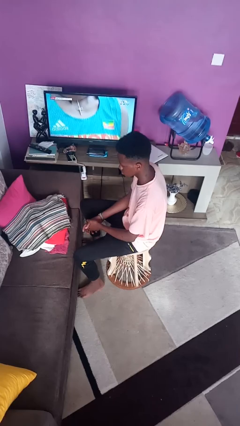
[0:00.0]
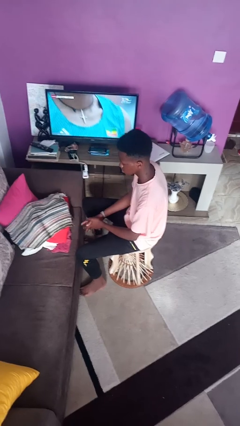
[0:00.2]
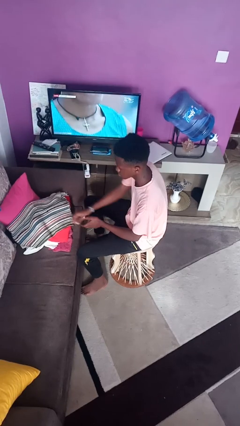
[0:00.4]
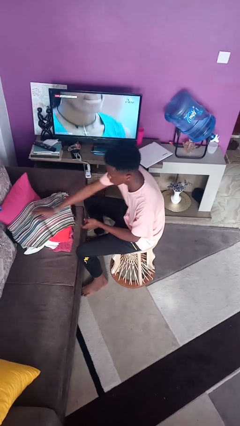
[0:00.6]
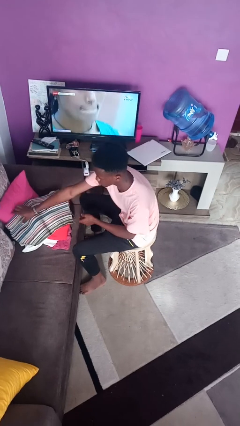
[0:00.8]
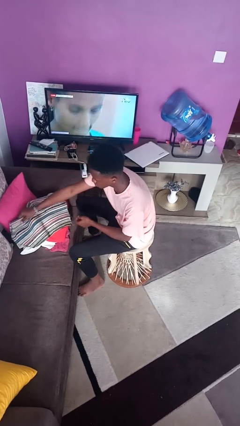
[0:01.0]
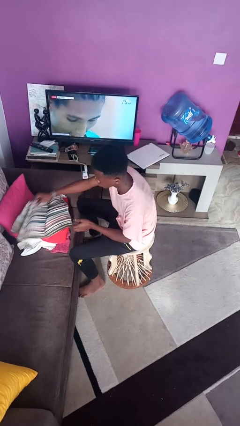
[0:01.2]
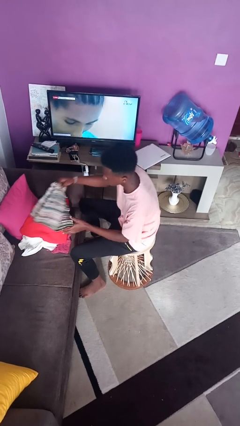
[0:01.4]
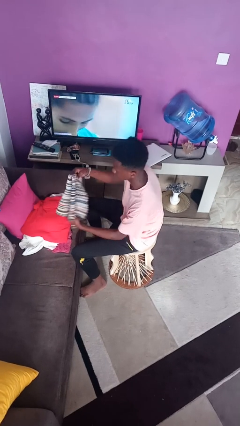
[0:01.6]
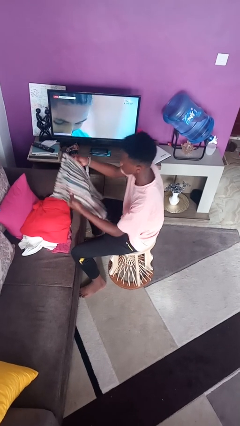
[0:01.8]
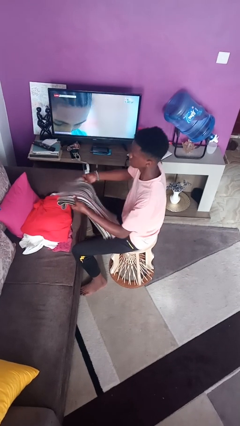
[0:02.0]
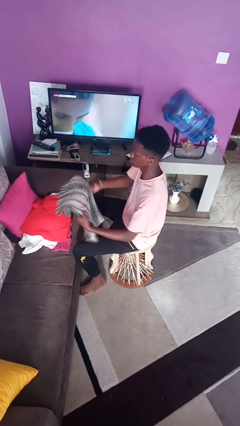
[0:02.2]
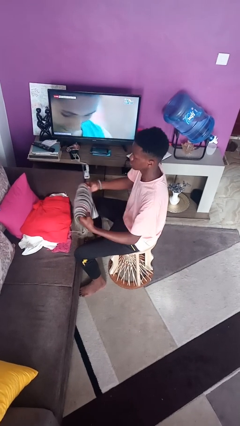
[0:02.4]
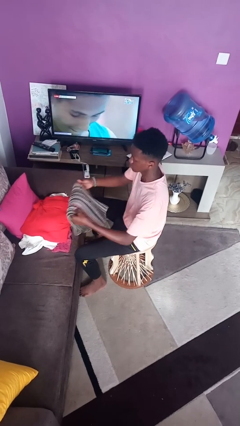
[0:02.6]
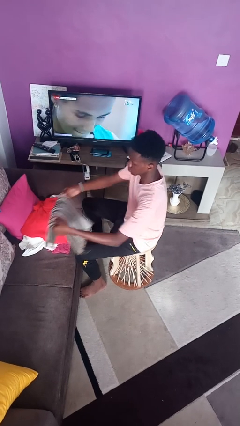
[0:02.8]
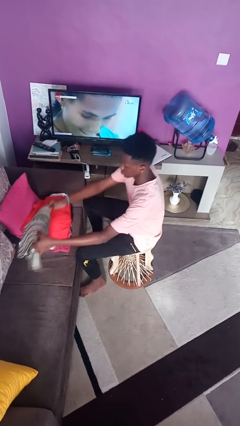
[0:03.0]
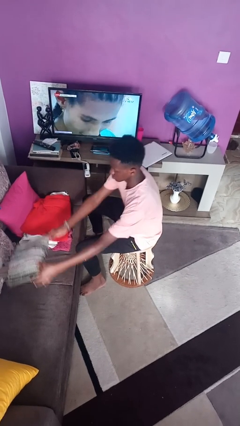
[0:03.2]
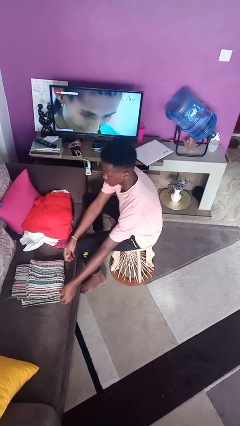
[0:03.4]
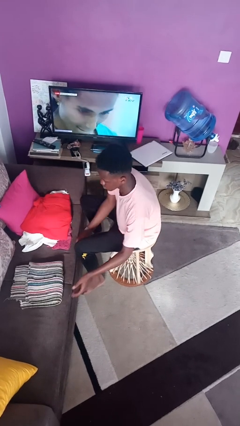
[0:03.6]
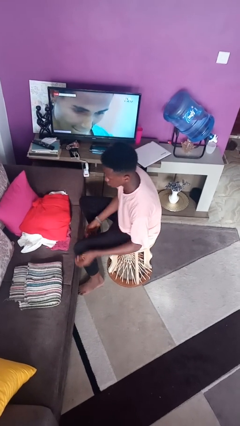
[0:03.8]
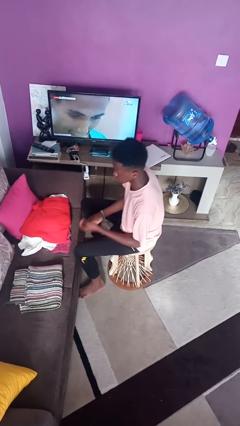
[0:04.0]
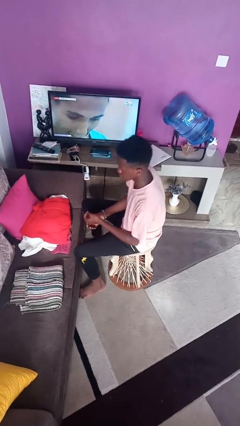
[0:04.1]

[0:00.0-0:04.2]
person folds towel

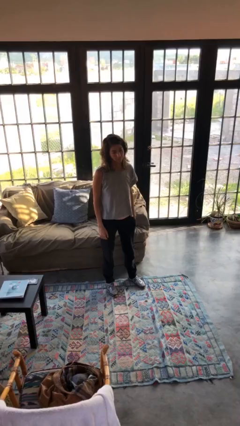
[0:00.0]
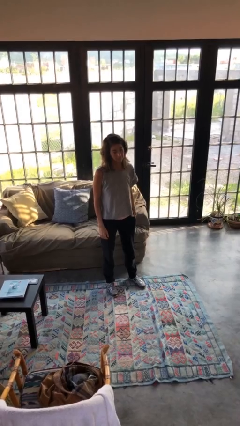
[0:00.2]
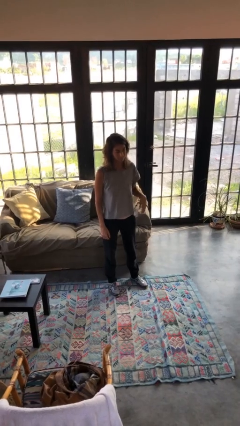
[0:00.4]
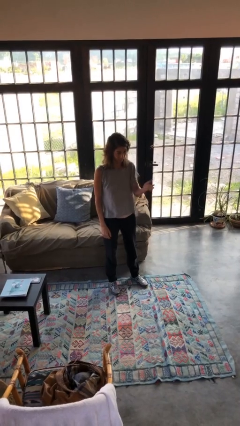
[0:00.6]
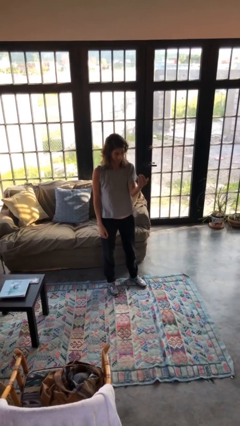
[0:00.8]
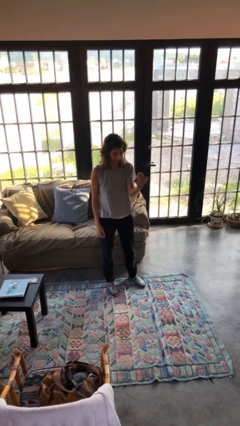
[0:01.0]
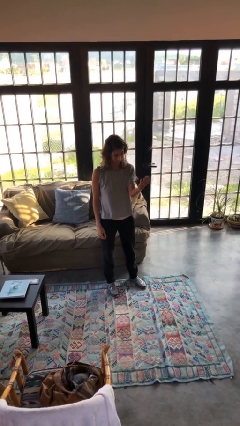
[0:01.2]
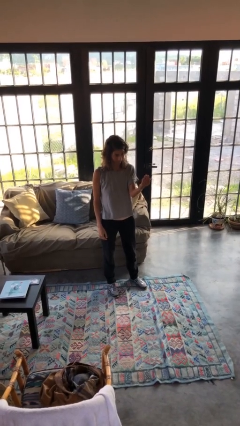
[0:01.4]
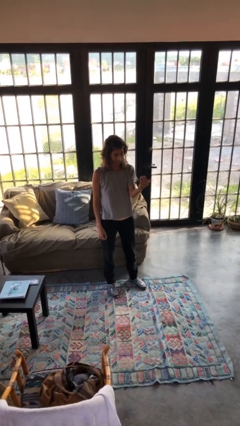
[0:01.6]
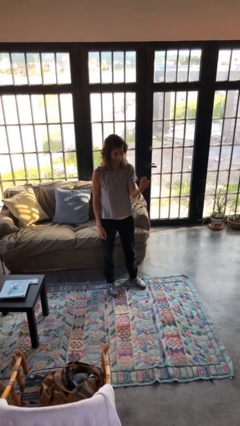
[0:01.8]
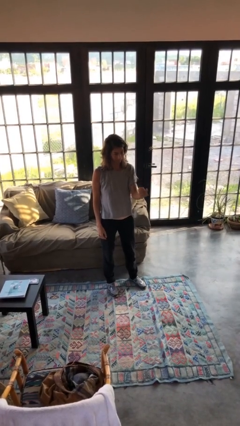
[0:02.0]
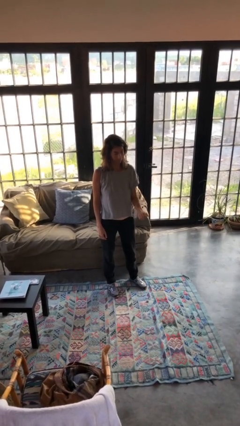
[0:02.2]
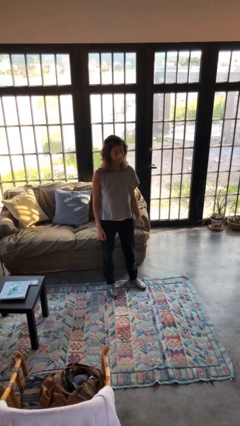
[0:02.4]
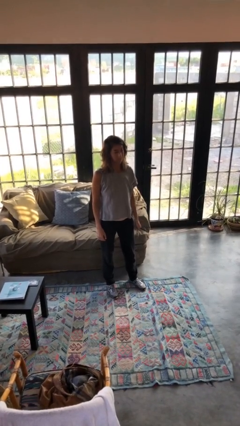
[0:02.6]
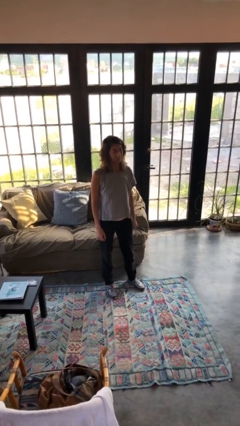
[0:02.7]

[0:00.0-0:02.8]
person gestures come here

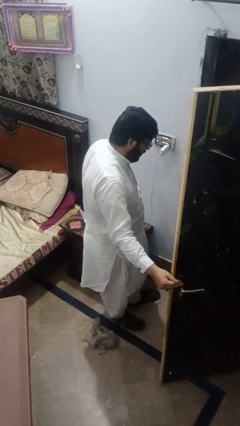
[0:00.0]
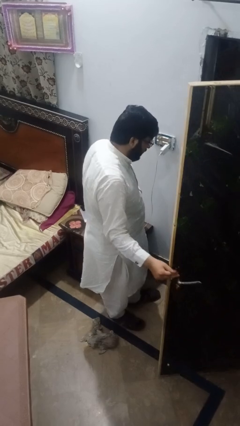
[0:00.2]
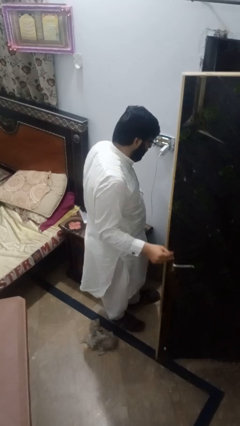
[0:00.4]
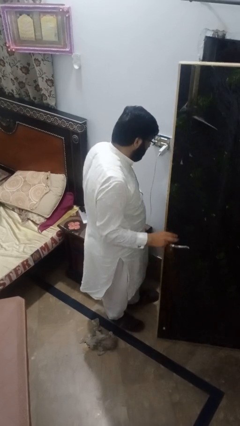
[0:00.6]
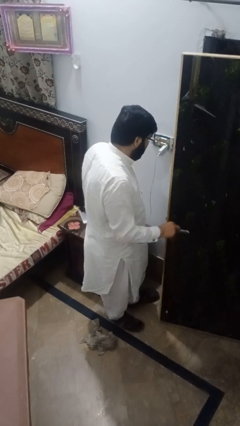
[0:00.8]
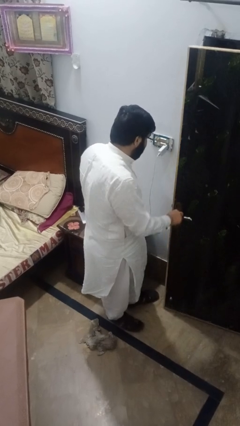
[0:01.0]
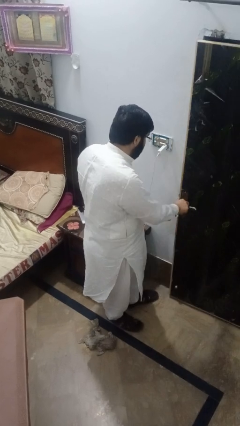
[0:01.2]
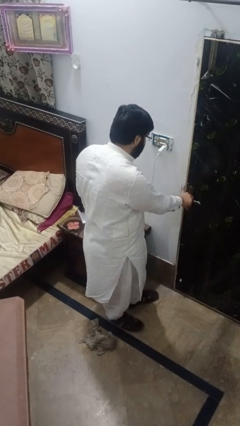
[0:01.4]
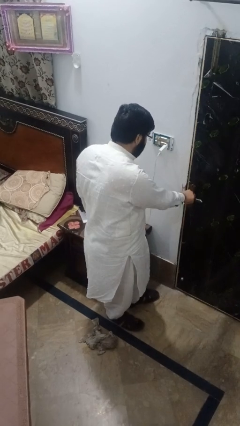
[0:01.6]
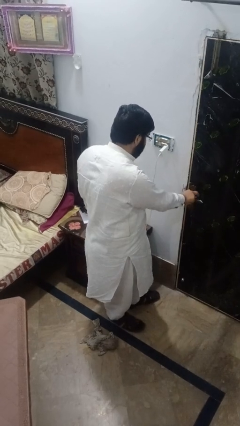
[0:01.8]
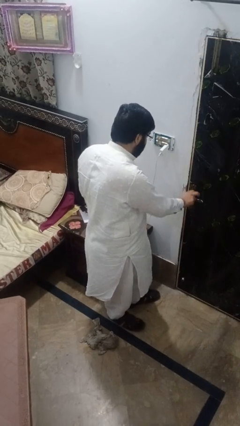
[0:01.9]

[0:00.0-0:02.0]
person closes facility door

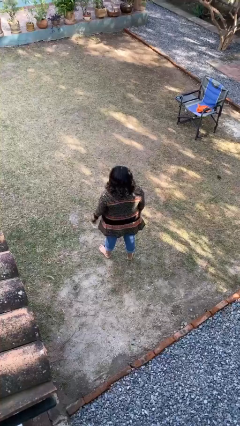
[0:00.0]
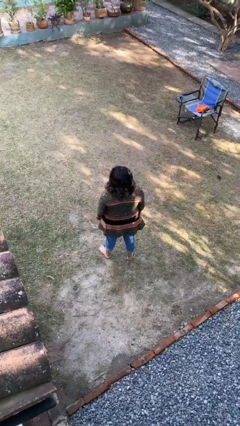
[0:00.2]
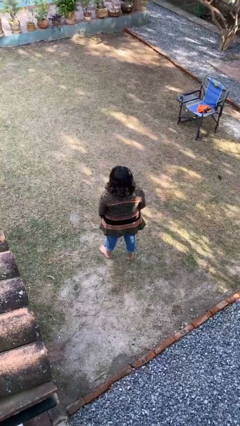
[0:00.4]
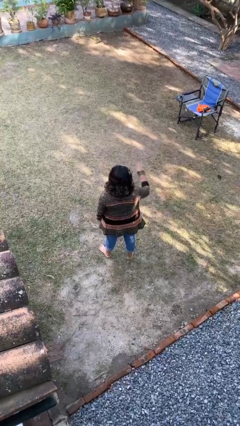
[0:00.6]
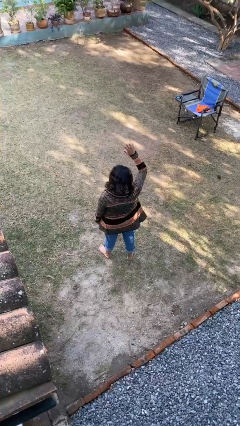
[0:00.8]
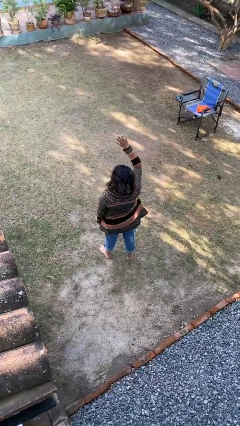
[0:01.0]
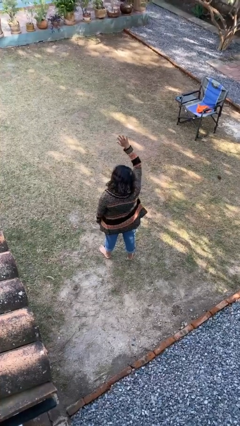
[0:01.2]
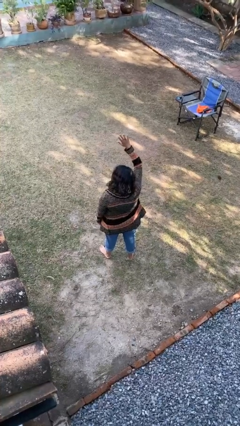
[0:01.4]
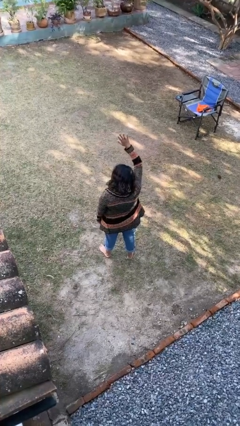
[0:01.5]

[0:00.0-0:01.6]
person gestures number five

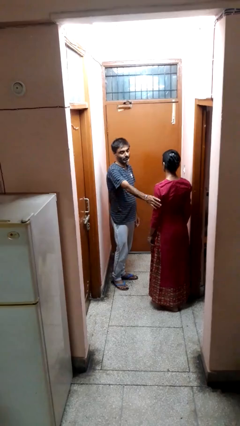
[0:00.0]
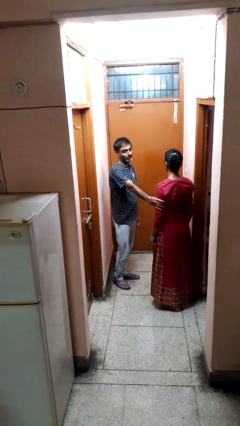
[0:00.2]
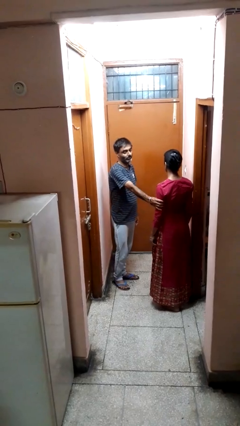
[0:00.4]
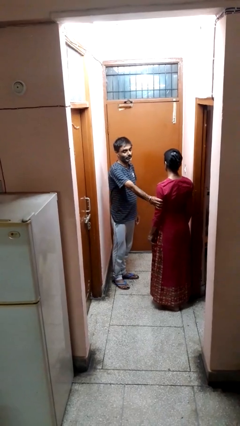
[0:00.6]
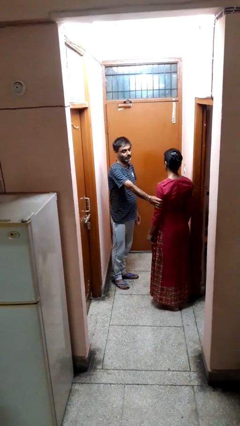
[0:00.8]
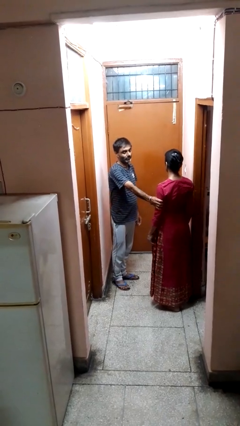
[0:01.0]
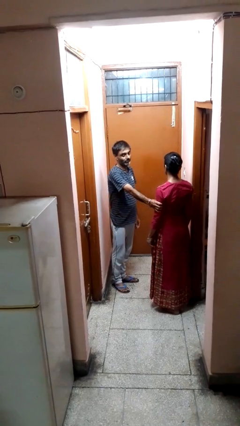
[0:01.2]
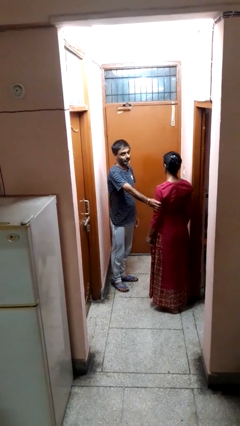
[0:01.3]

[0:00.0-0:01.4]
person grabs person by bicep

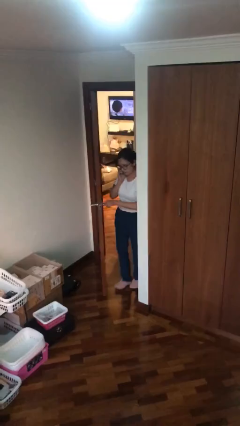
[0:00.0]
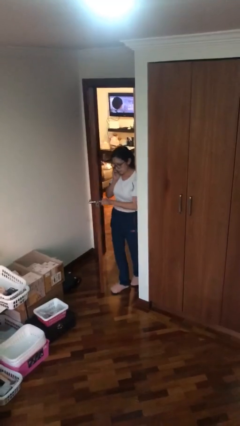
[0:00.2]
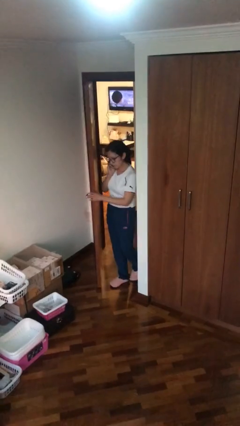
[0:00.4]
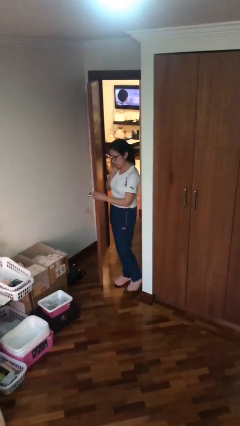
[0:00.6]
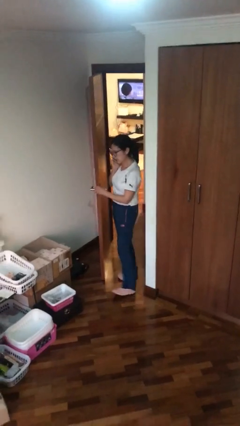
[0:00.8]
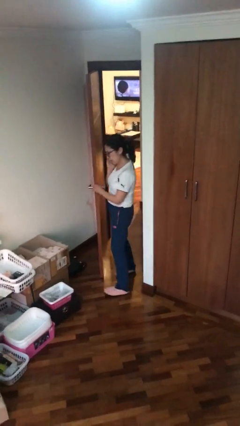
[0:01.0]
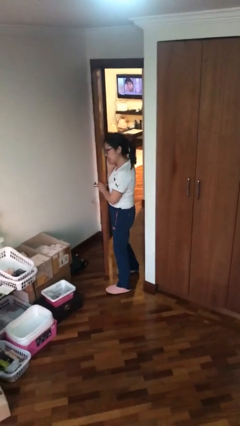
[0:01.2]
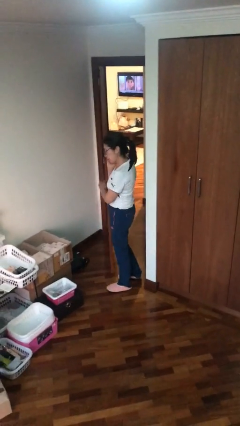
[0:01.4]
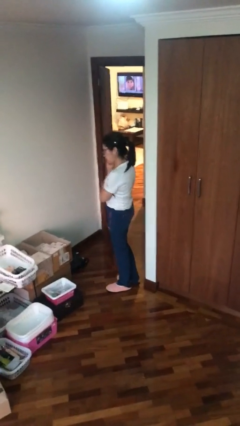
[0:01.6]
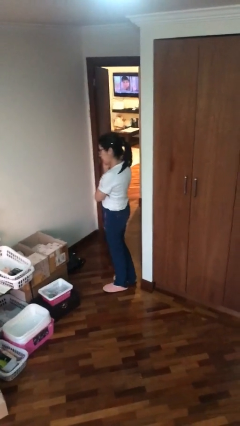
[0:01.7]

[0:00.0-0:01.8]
person enters scene through structure

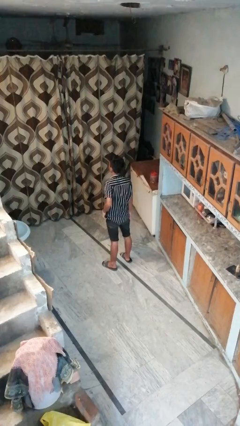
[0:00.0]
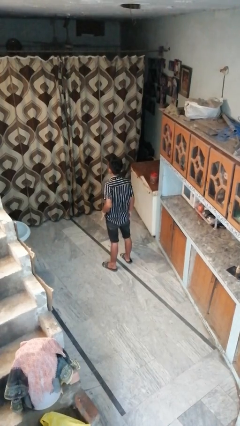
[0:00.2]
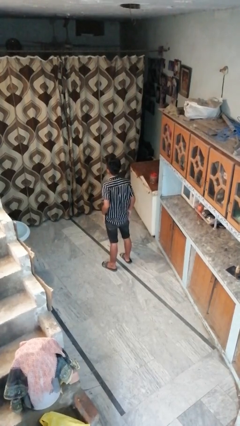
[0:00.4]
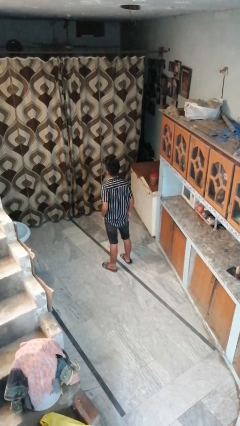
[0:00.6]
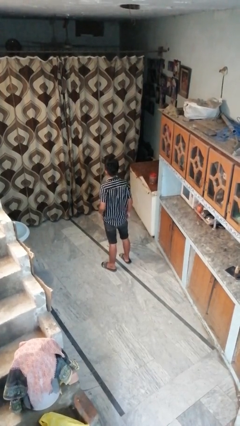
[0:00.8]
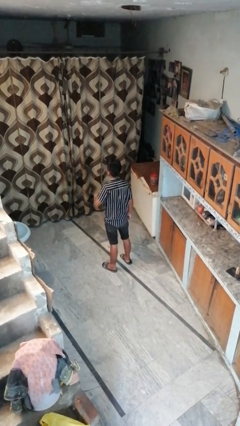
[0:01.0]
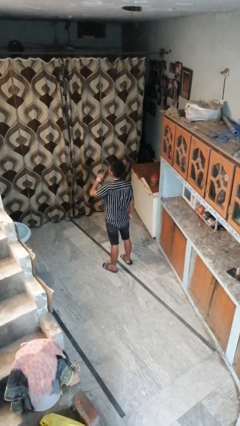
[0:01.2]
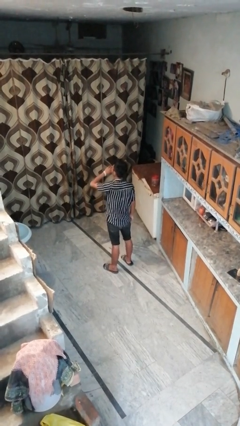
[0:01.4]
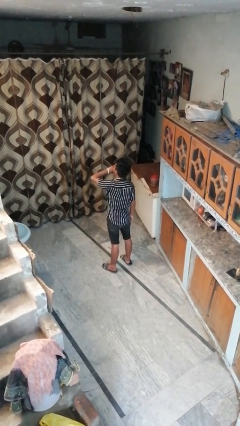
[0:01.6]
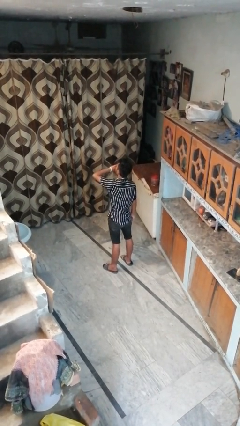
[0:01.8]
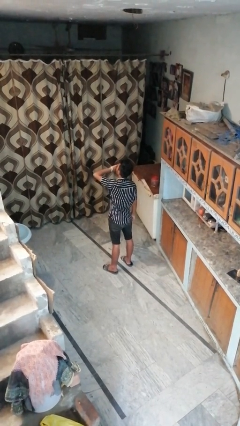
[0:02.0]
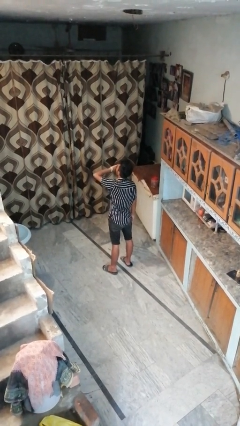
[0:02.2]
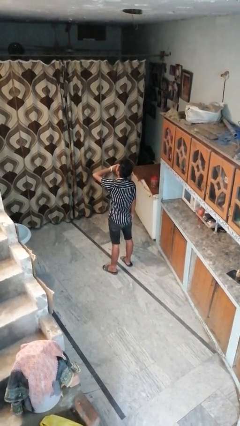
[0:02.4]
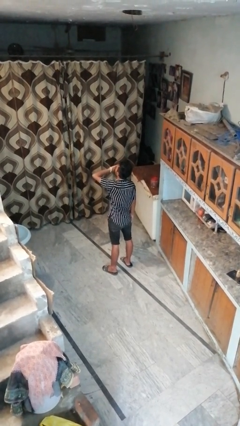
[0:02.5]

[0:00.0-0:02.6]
person yawns

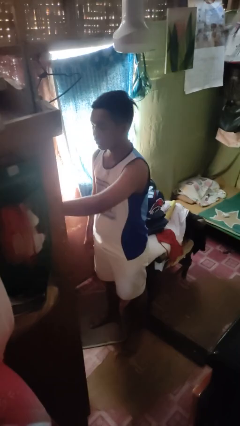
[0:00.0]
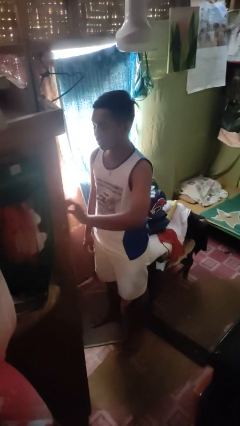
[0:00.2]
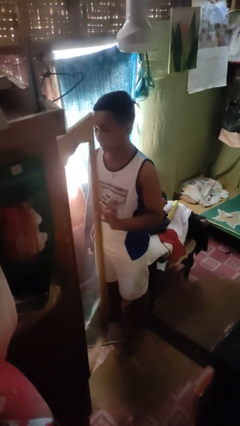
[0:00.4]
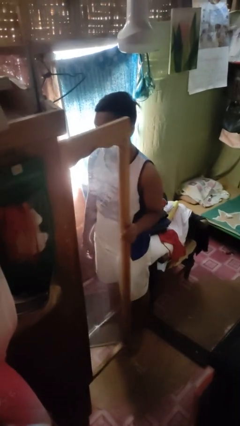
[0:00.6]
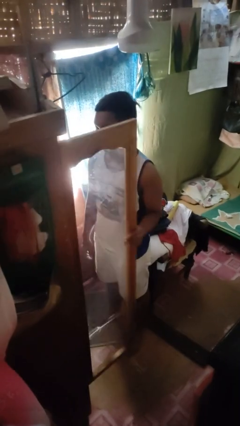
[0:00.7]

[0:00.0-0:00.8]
person opens closet door
